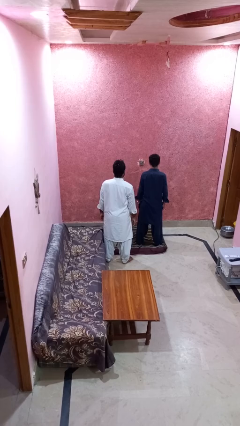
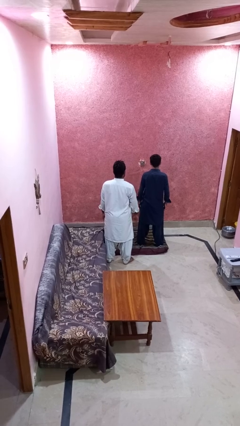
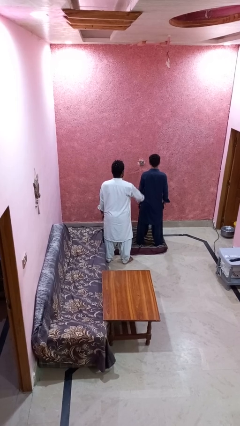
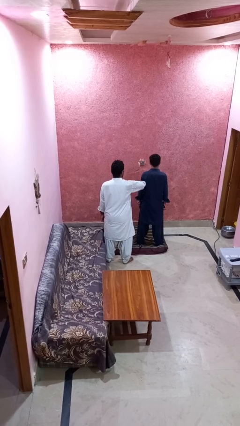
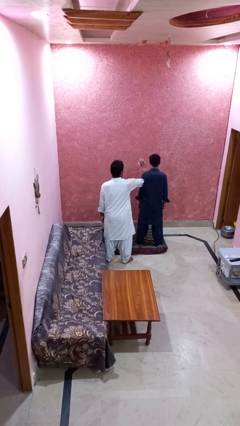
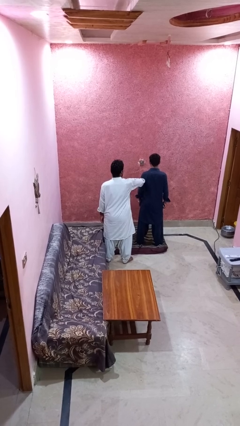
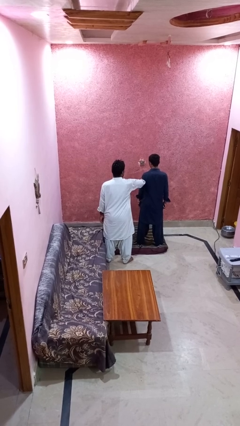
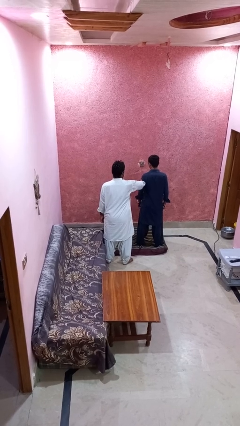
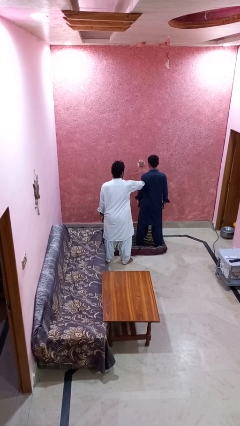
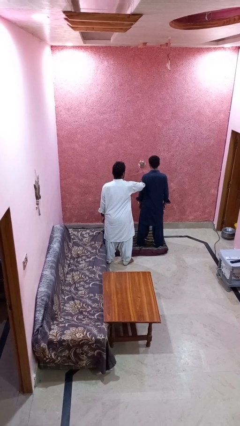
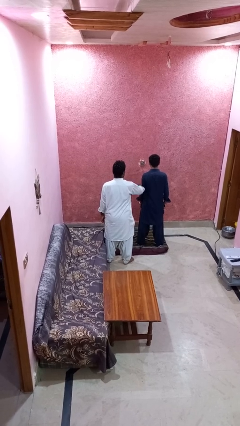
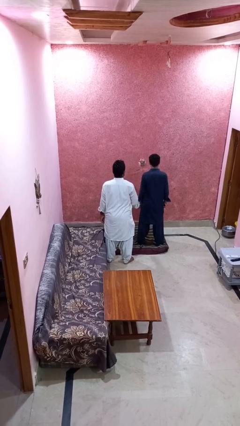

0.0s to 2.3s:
person grabs person by forearm

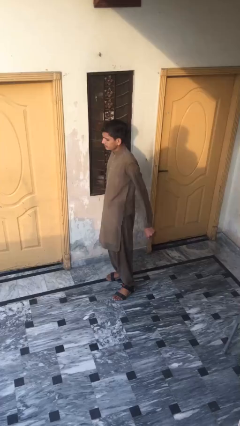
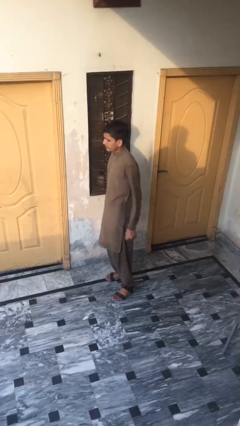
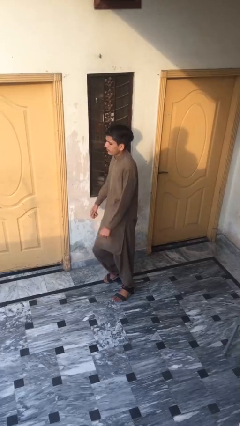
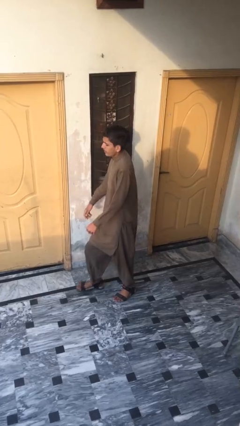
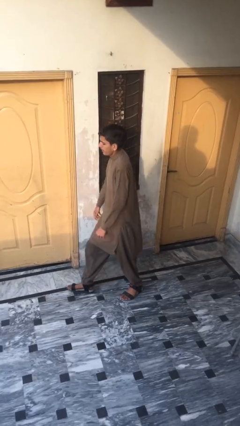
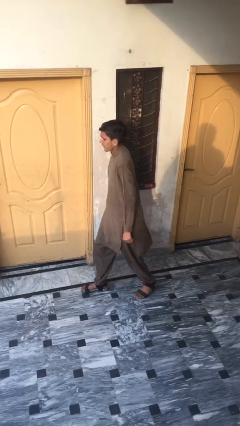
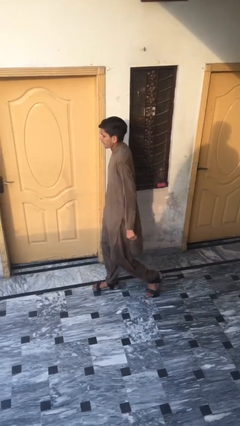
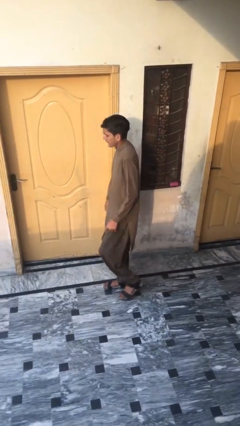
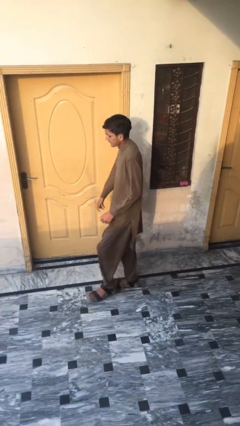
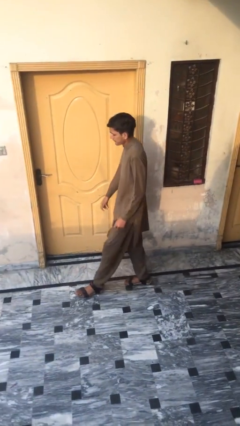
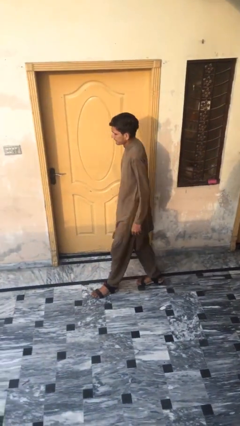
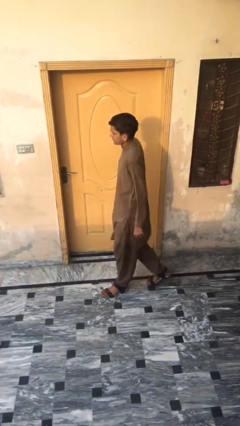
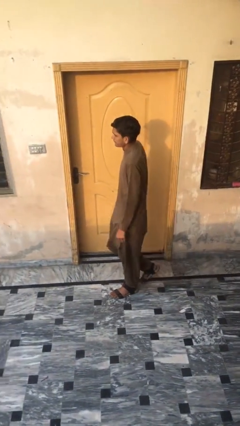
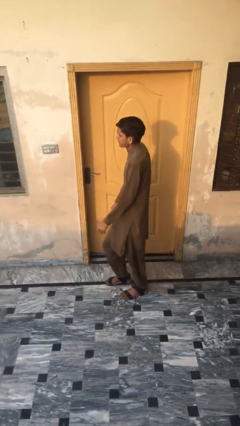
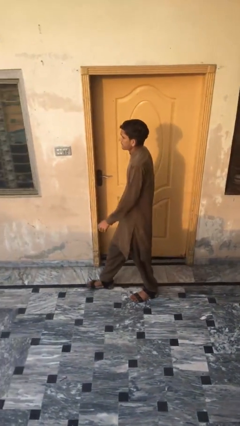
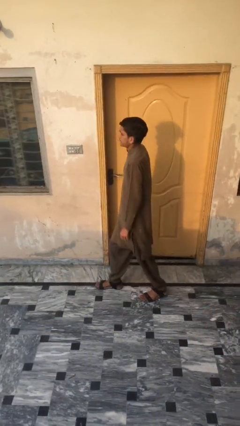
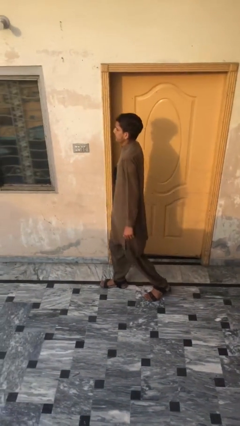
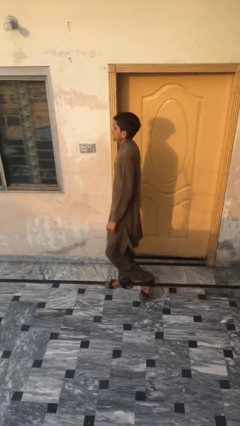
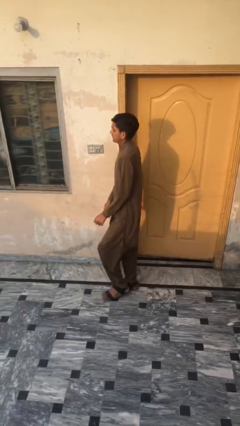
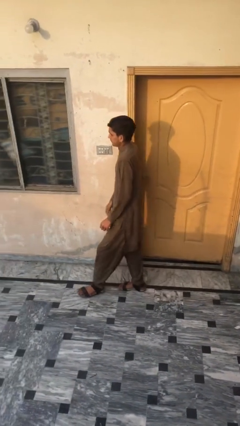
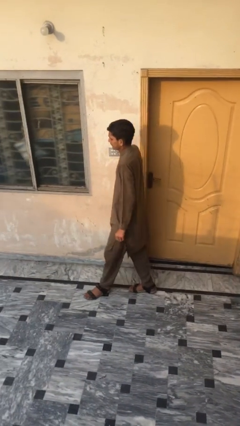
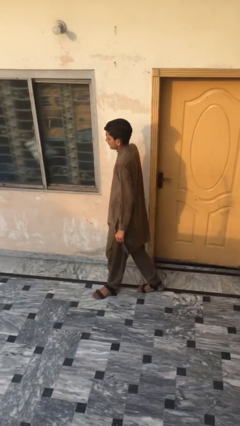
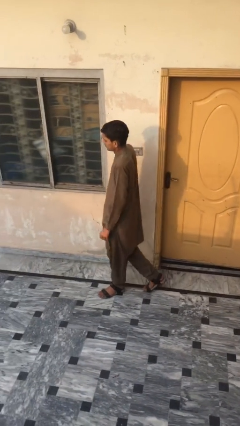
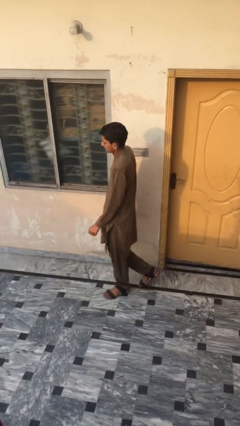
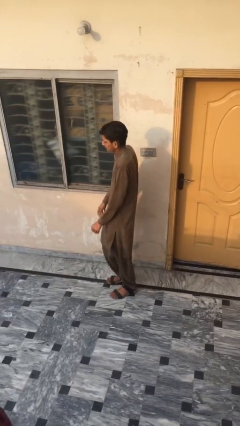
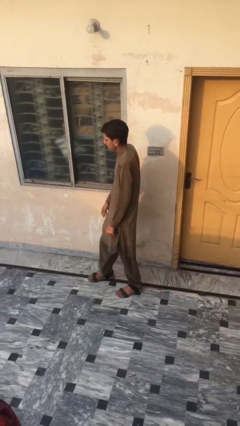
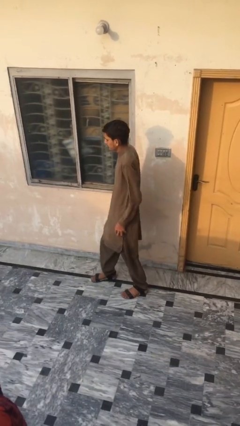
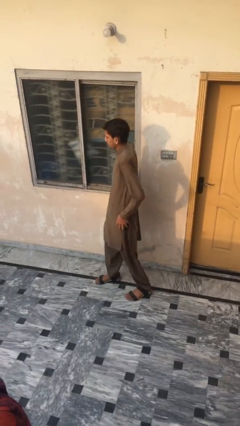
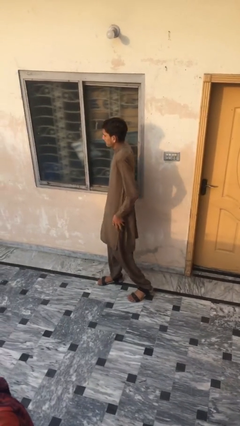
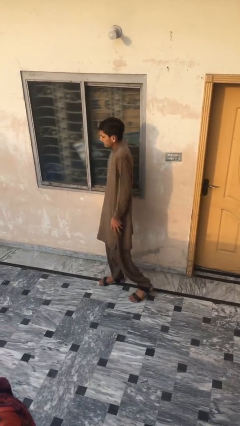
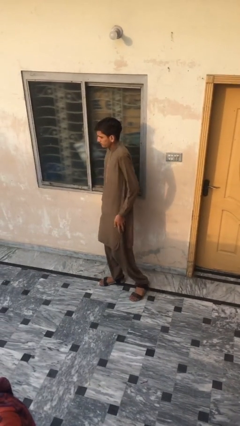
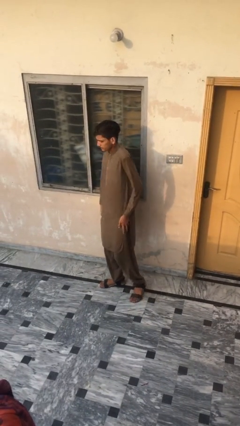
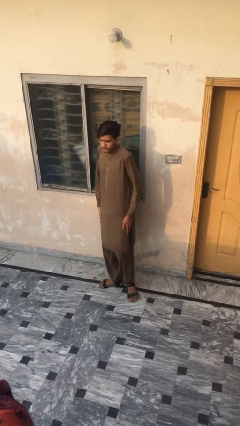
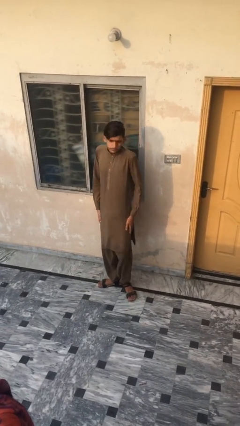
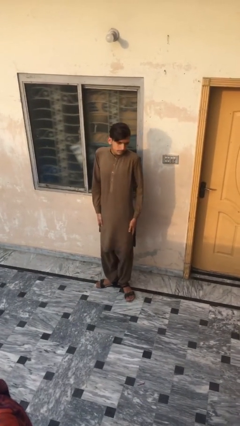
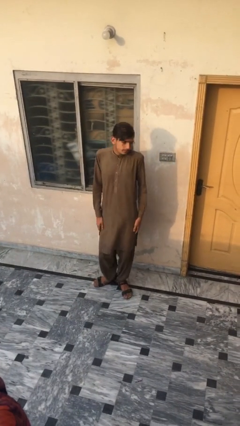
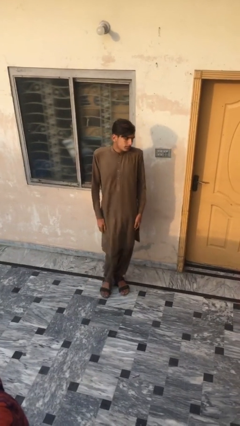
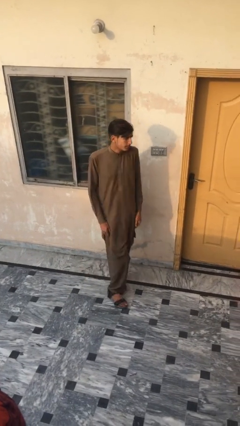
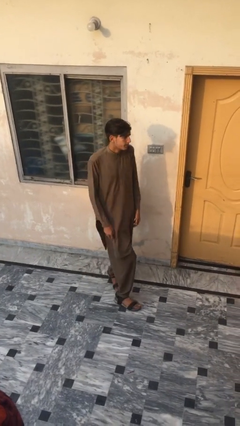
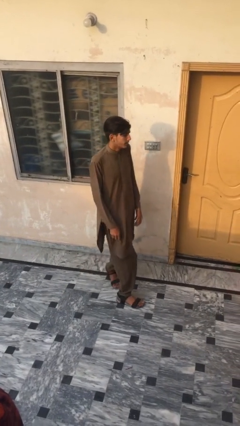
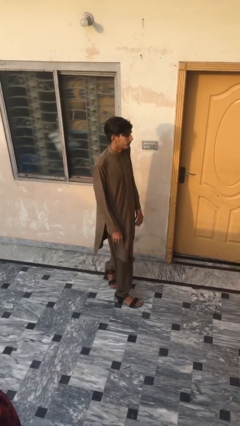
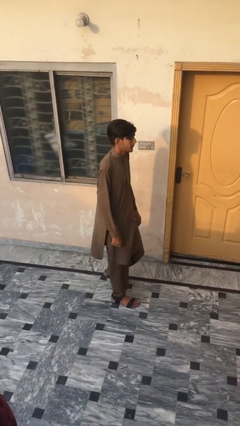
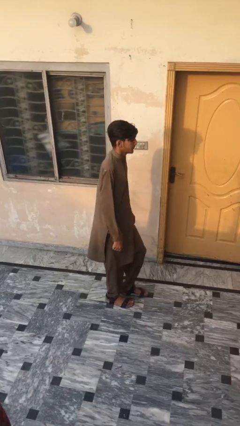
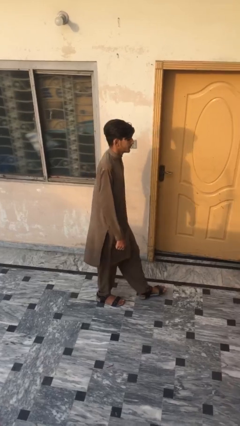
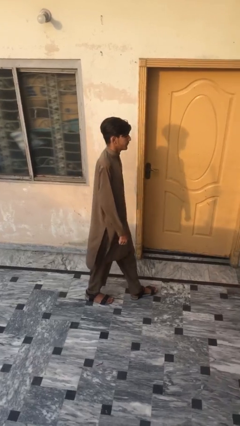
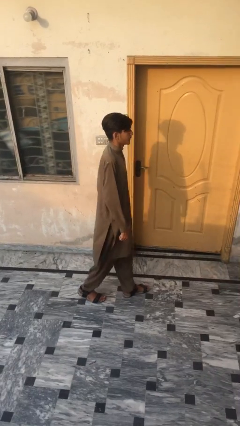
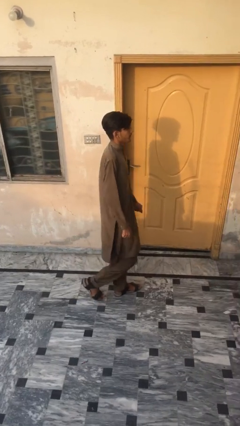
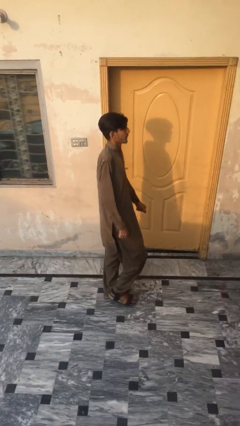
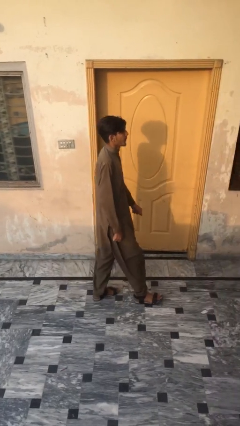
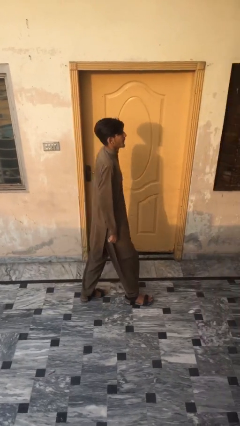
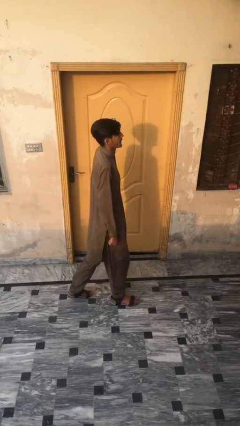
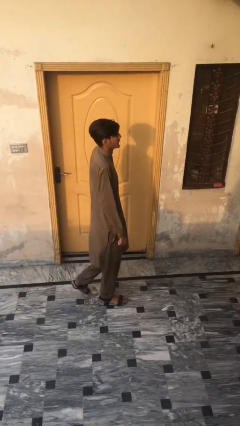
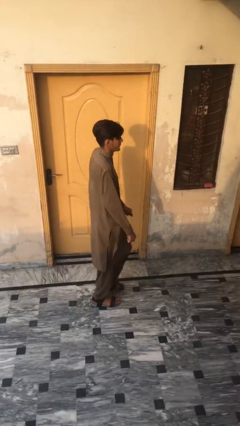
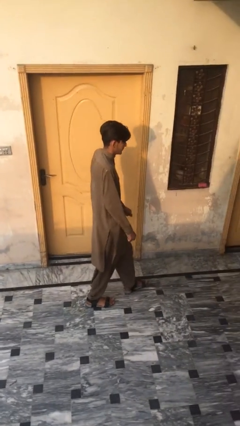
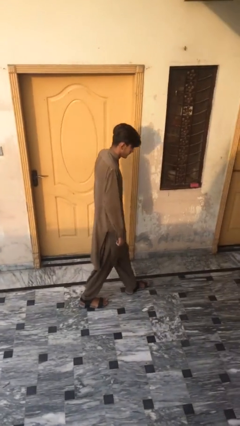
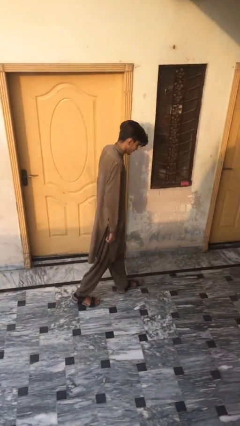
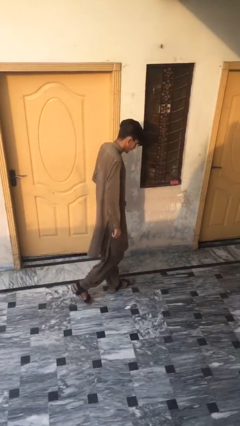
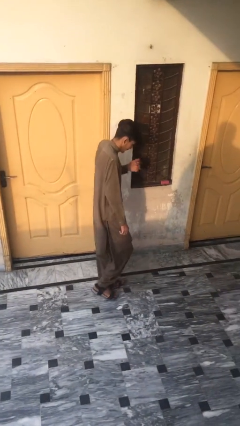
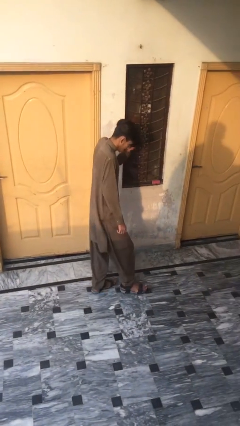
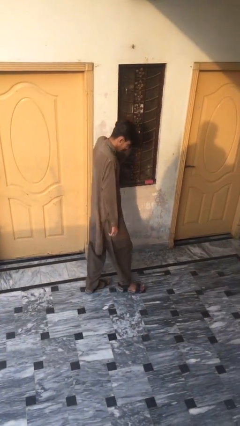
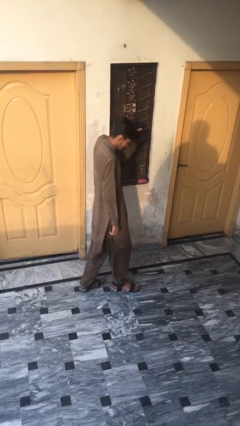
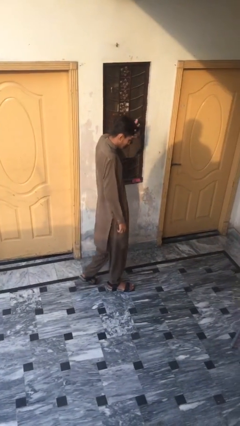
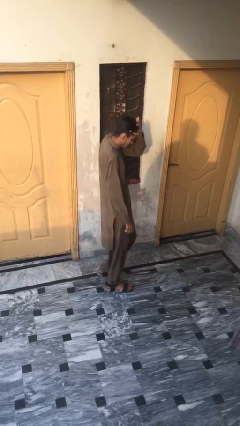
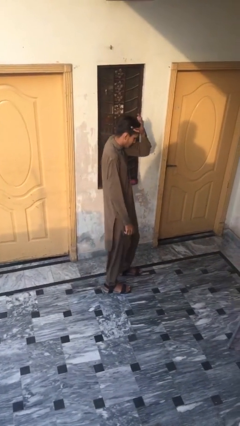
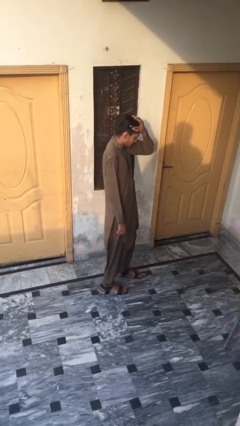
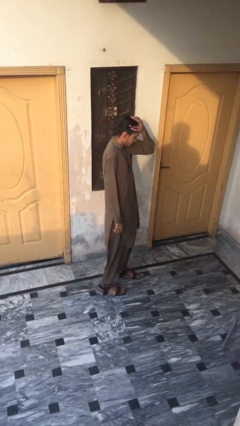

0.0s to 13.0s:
person walks

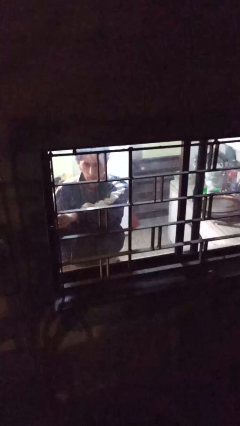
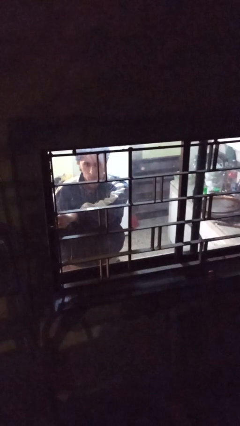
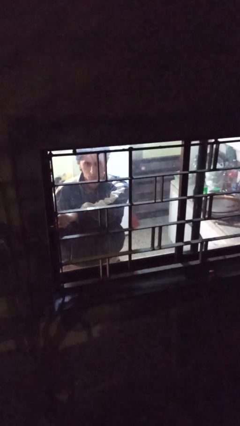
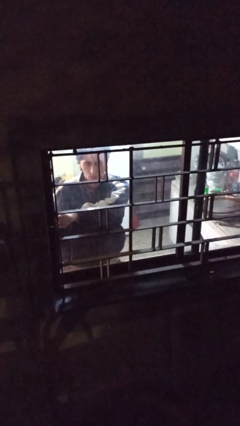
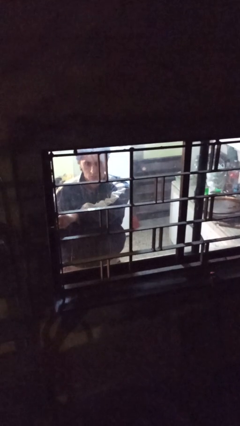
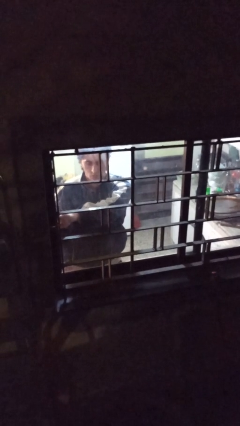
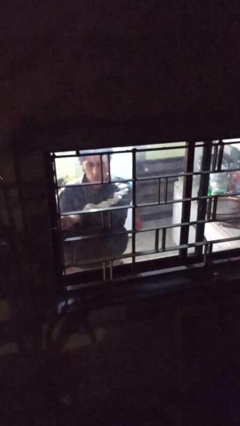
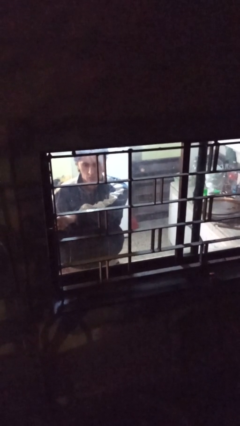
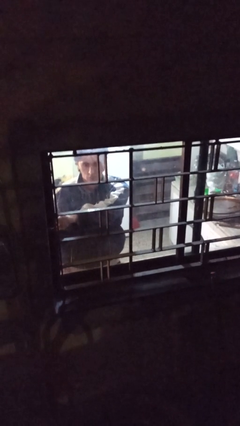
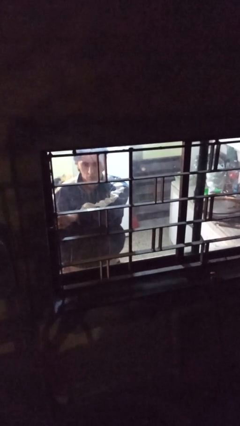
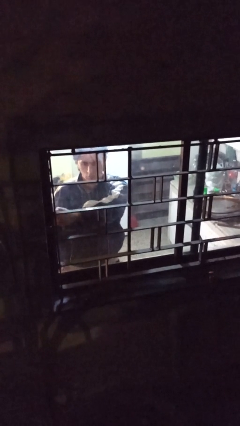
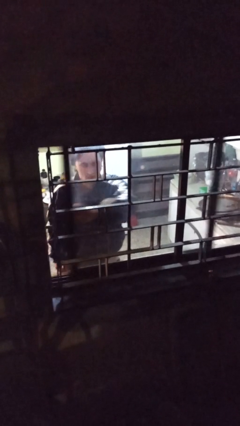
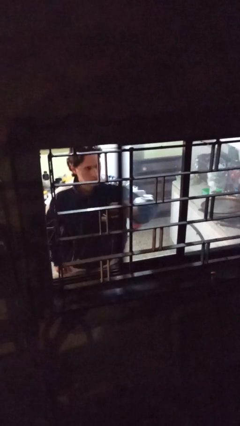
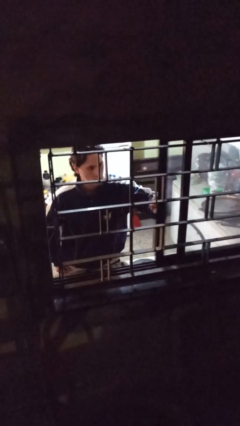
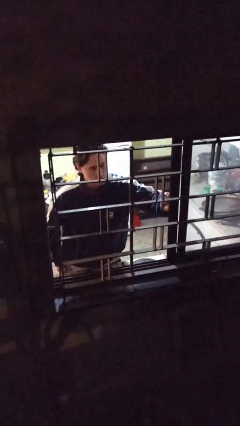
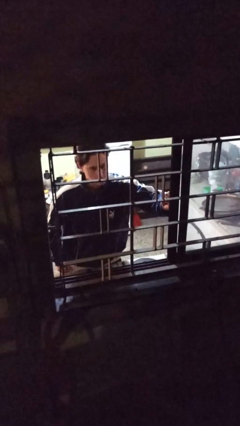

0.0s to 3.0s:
person opens home window
